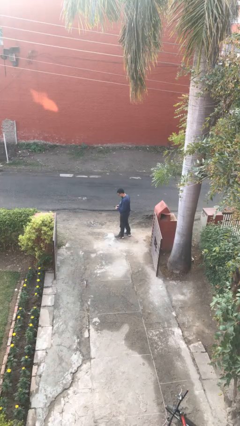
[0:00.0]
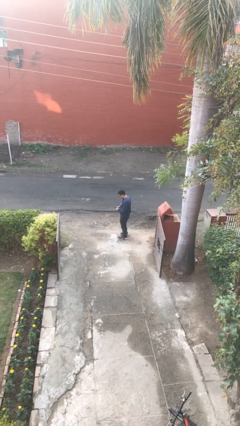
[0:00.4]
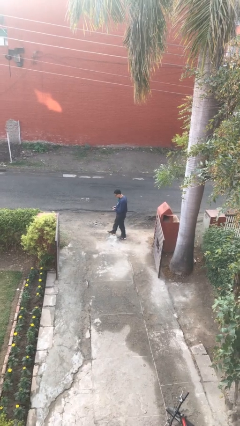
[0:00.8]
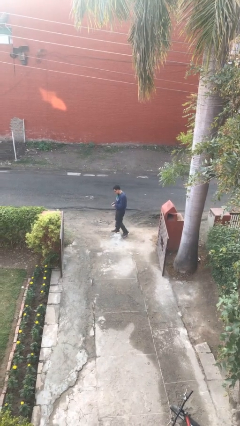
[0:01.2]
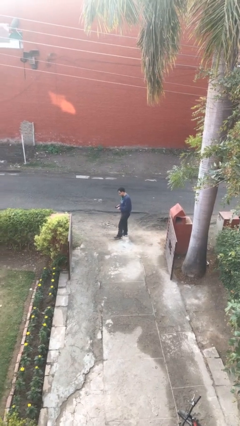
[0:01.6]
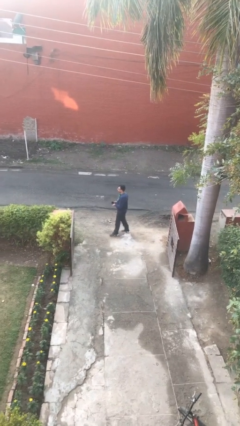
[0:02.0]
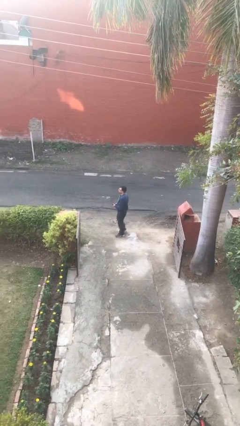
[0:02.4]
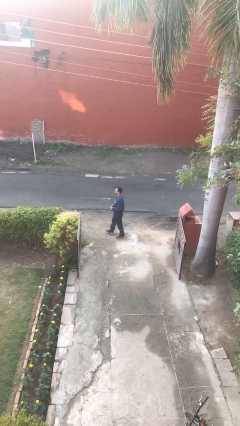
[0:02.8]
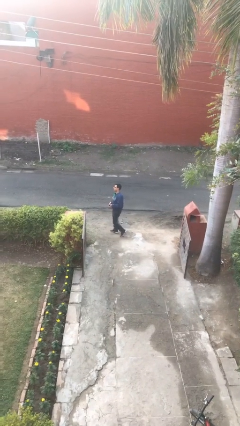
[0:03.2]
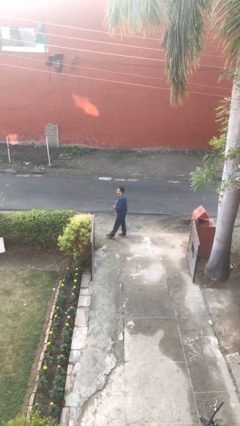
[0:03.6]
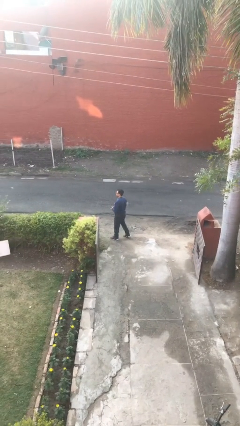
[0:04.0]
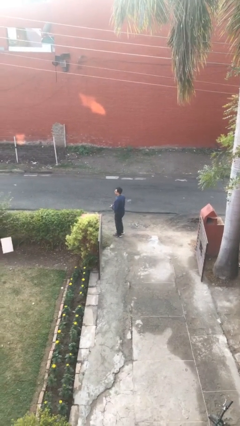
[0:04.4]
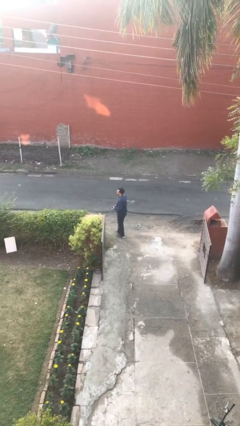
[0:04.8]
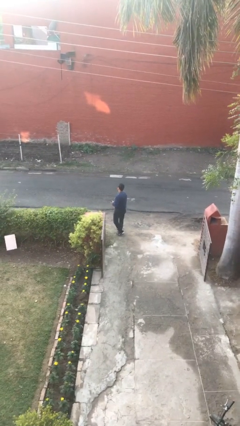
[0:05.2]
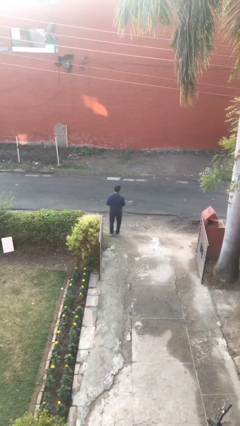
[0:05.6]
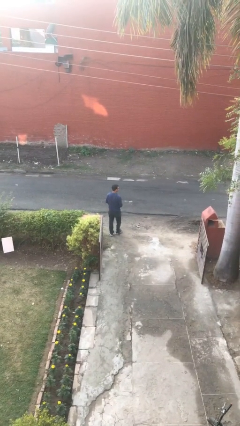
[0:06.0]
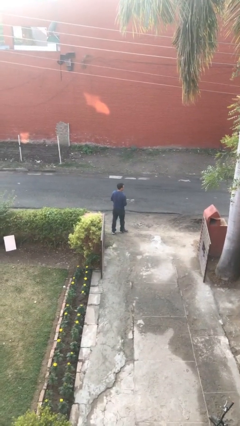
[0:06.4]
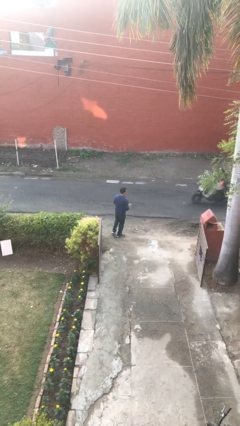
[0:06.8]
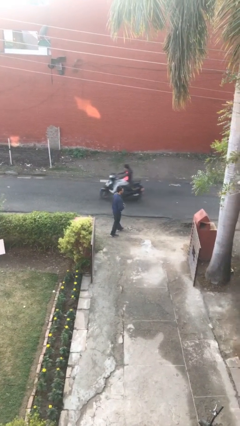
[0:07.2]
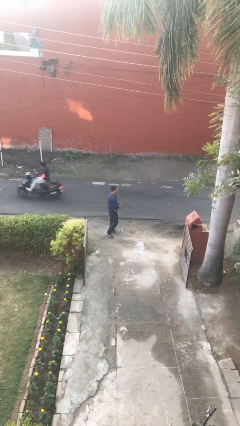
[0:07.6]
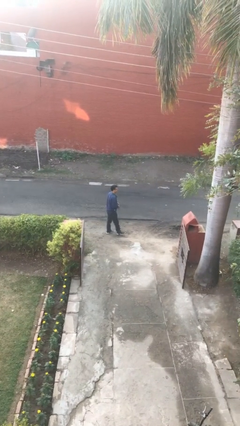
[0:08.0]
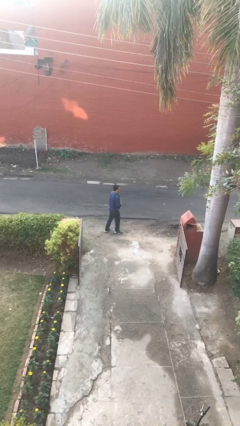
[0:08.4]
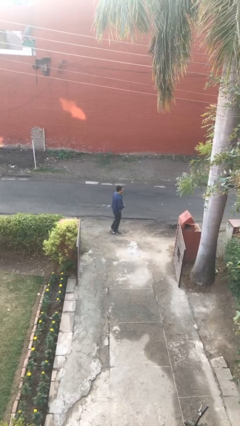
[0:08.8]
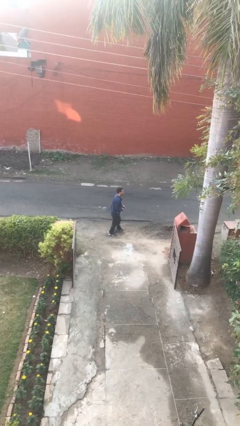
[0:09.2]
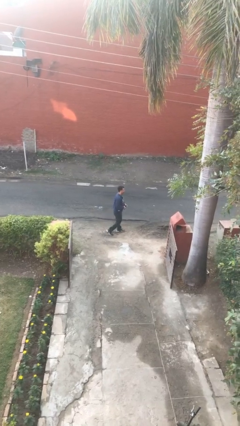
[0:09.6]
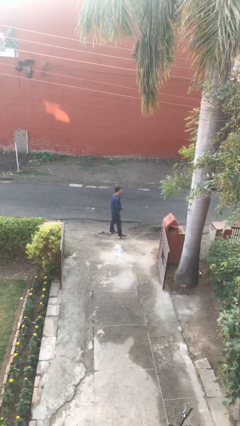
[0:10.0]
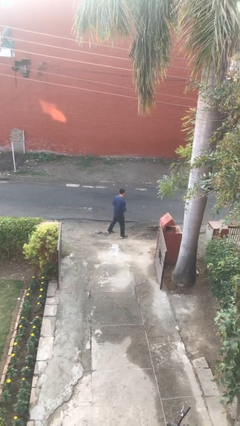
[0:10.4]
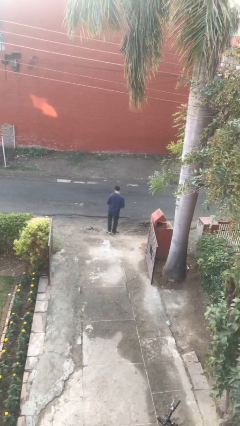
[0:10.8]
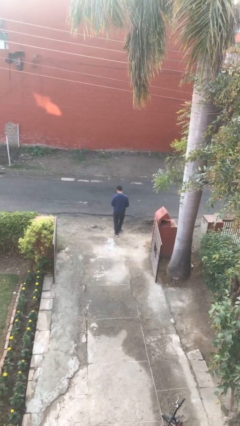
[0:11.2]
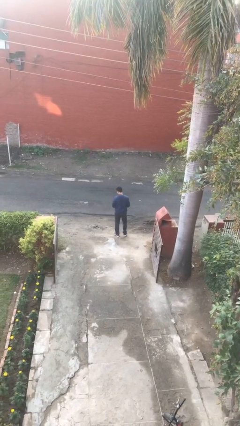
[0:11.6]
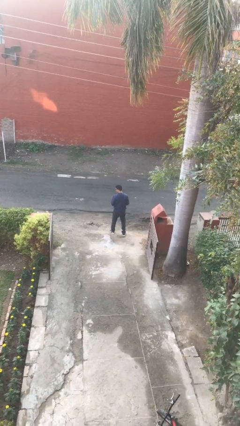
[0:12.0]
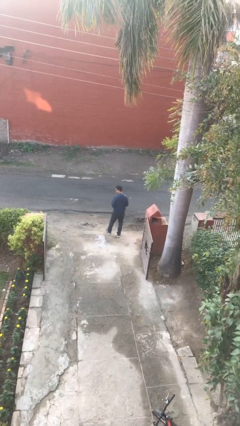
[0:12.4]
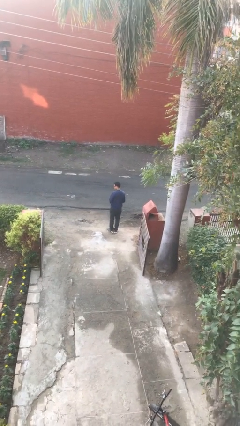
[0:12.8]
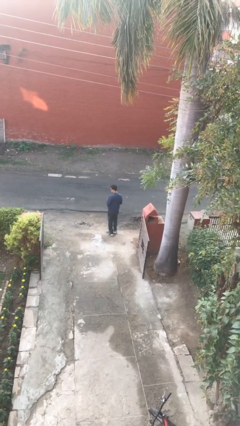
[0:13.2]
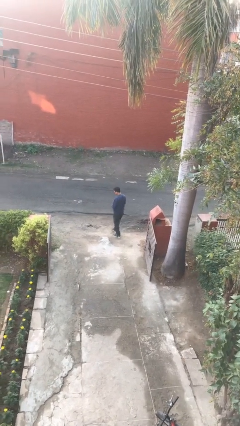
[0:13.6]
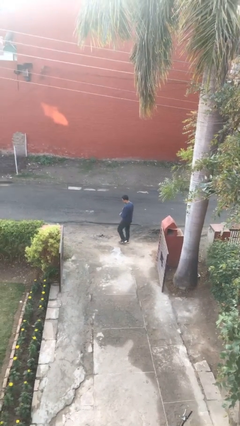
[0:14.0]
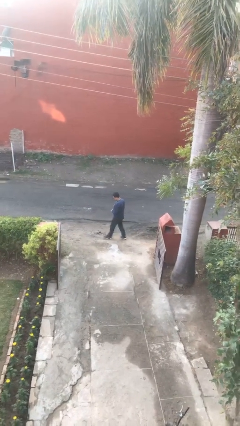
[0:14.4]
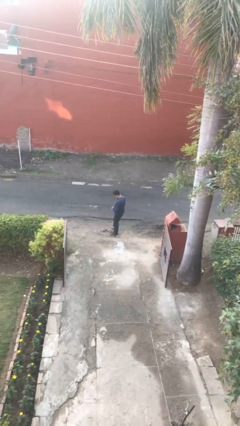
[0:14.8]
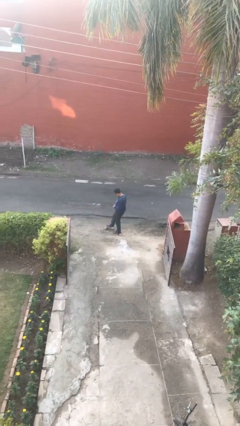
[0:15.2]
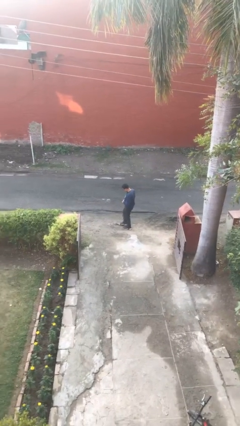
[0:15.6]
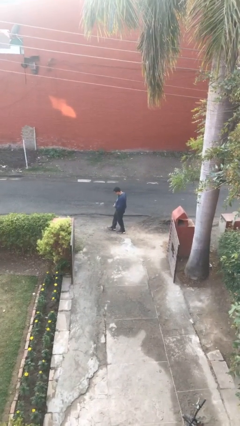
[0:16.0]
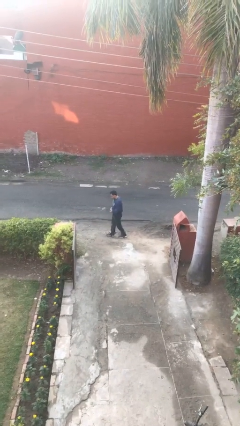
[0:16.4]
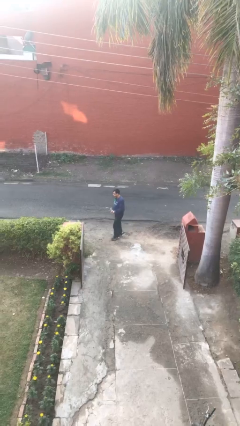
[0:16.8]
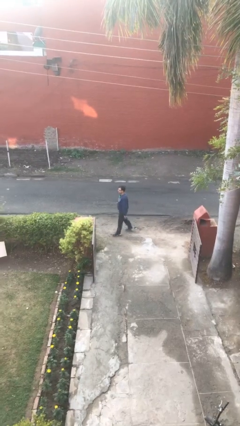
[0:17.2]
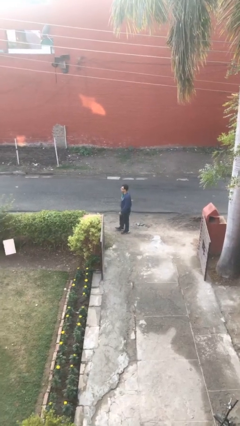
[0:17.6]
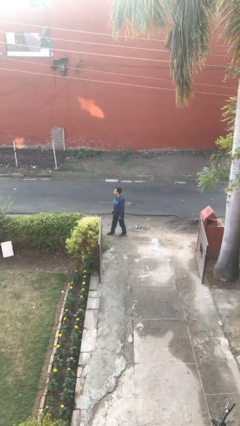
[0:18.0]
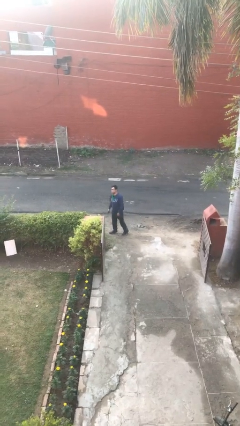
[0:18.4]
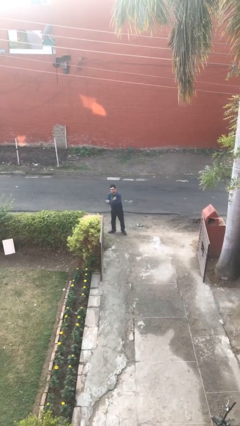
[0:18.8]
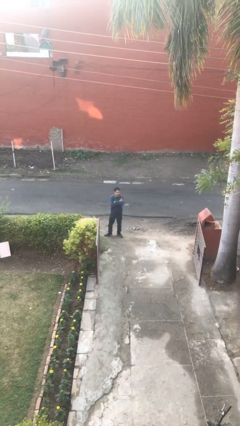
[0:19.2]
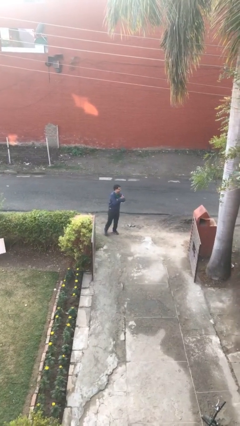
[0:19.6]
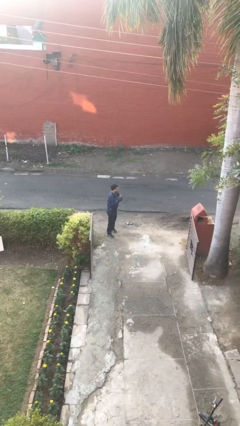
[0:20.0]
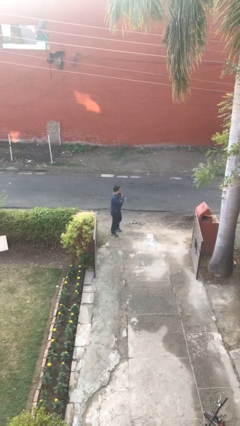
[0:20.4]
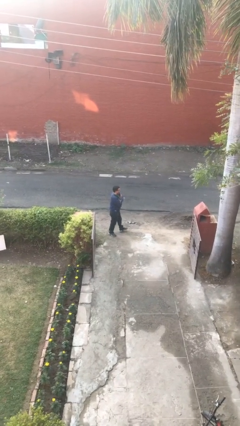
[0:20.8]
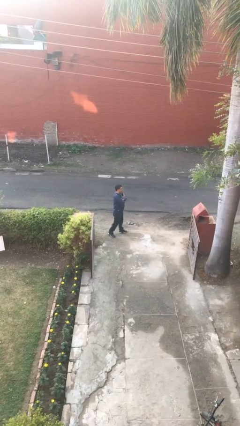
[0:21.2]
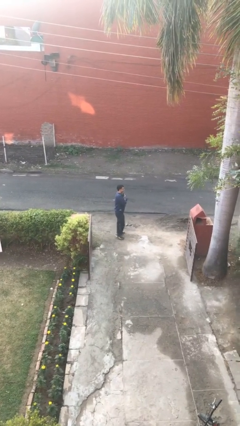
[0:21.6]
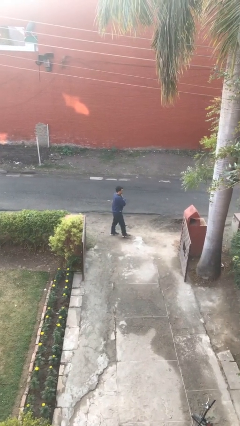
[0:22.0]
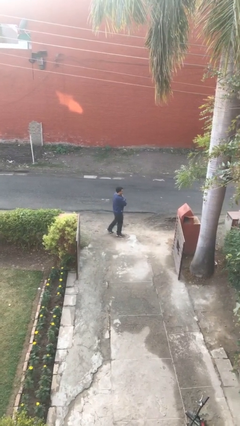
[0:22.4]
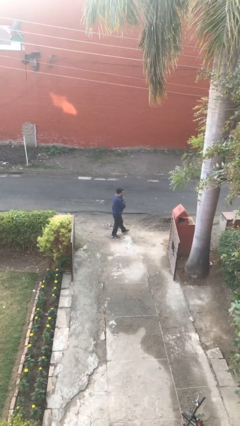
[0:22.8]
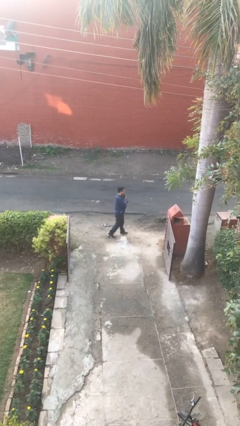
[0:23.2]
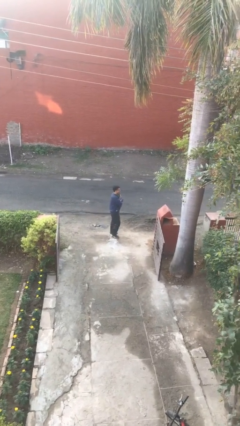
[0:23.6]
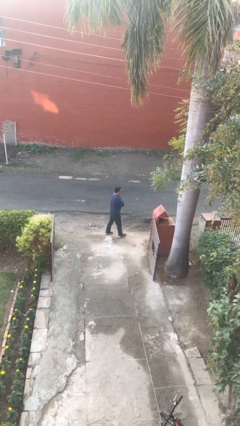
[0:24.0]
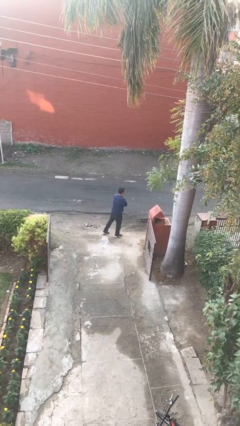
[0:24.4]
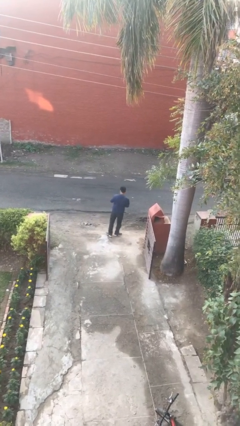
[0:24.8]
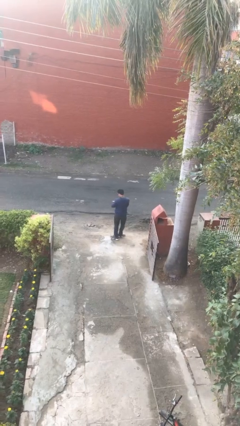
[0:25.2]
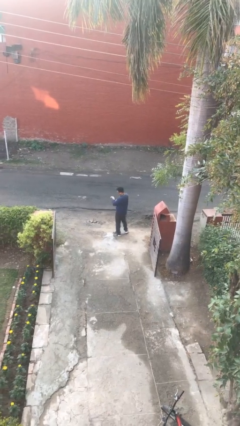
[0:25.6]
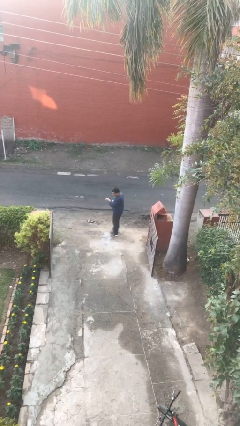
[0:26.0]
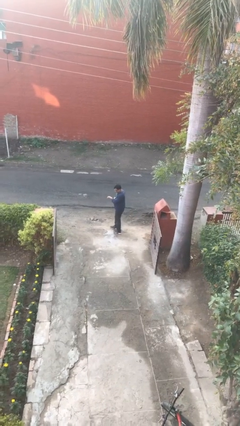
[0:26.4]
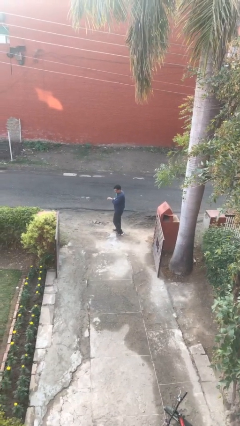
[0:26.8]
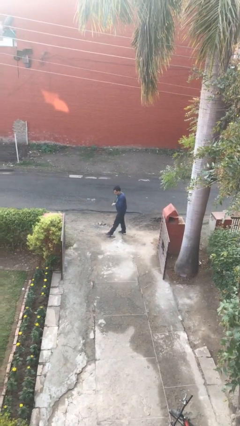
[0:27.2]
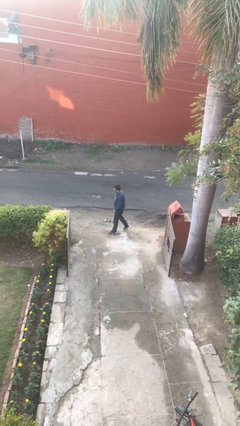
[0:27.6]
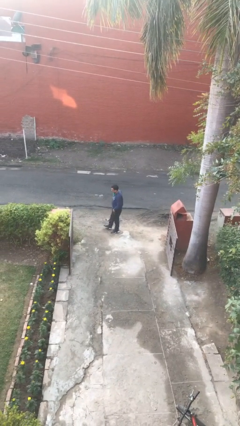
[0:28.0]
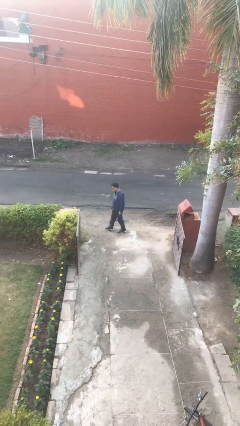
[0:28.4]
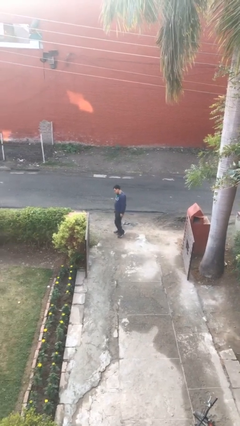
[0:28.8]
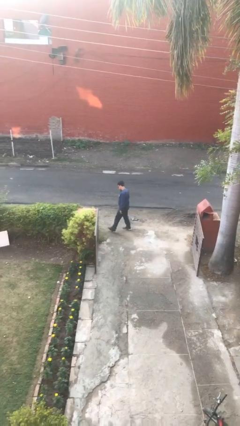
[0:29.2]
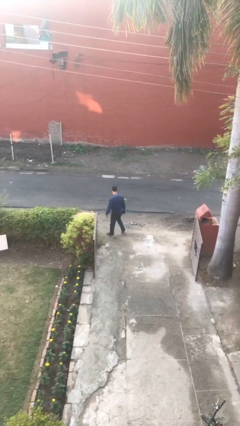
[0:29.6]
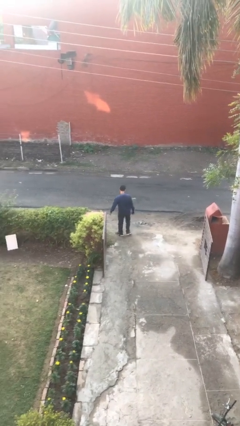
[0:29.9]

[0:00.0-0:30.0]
person walks

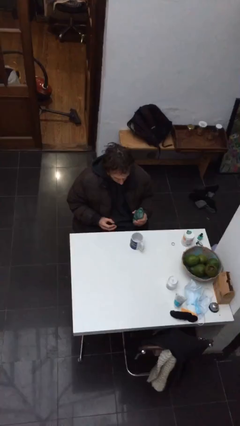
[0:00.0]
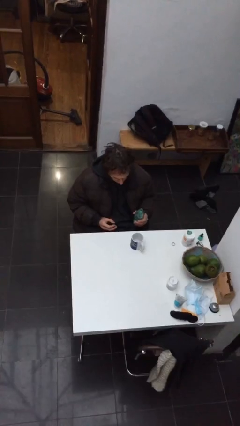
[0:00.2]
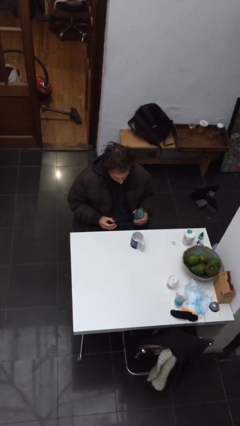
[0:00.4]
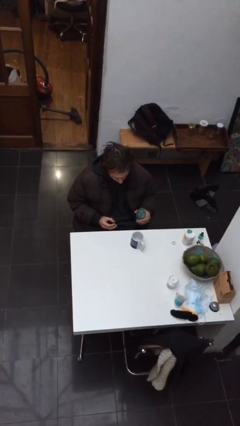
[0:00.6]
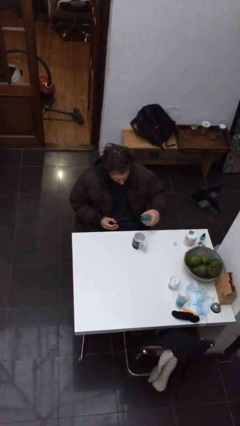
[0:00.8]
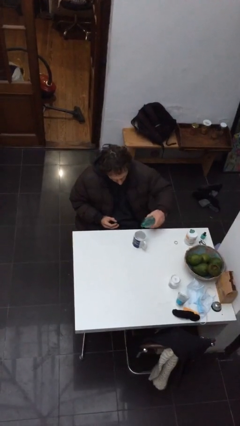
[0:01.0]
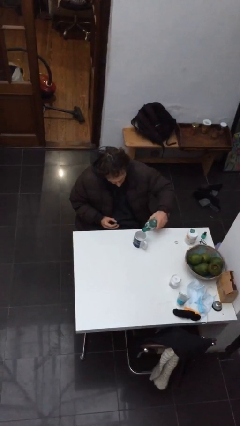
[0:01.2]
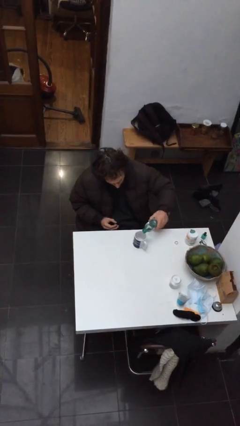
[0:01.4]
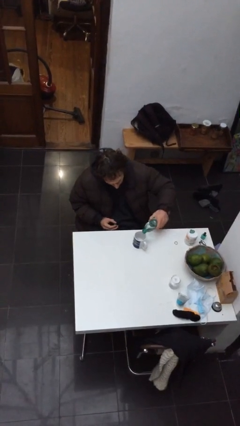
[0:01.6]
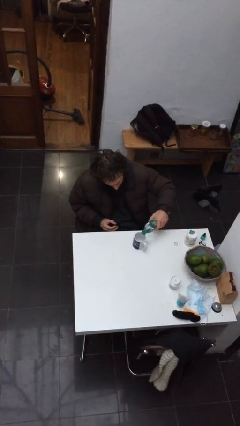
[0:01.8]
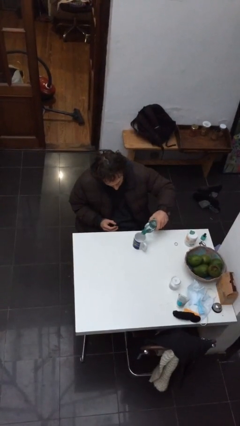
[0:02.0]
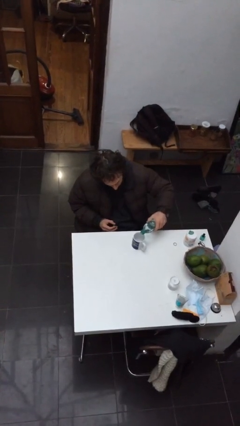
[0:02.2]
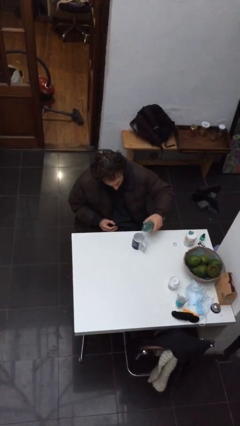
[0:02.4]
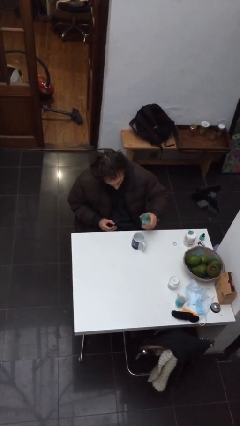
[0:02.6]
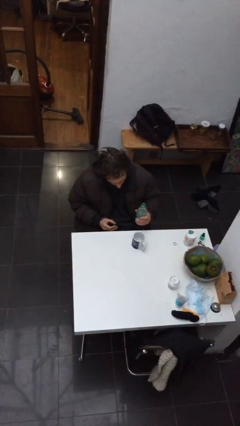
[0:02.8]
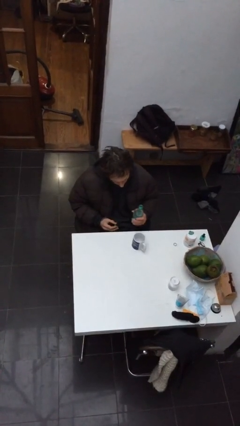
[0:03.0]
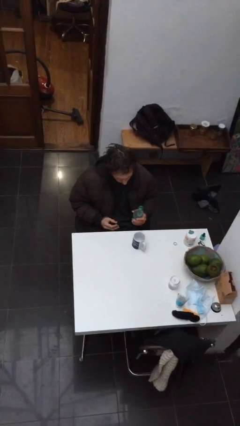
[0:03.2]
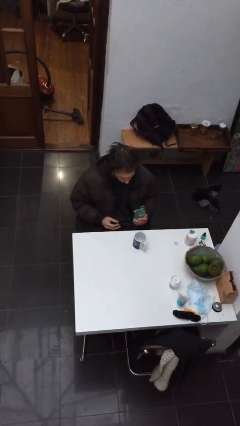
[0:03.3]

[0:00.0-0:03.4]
person pours liquid into cup
